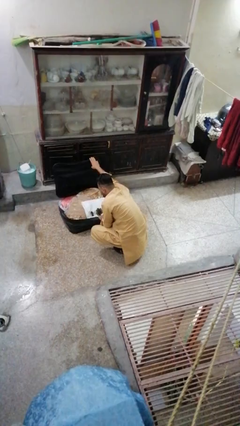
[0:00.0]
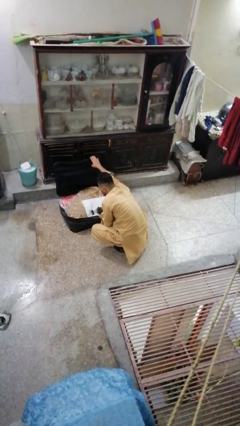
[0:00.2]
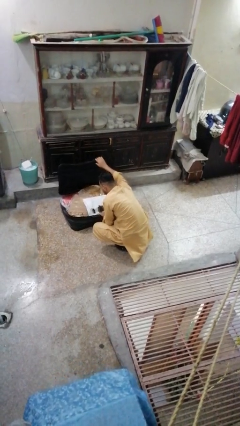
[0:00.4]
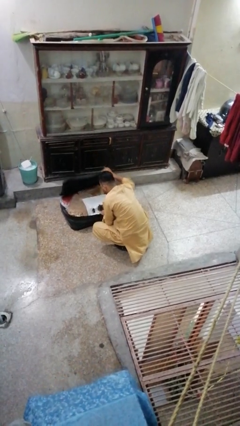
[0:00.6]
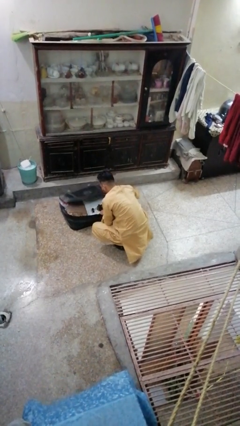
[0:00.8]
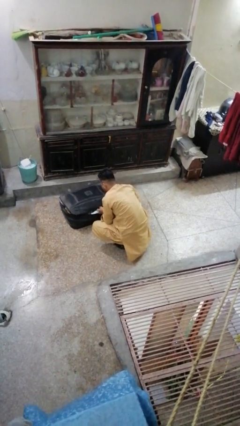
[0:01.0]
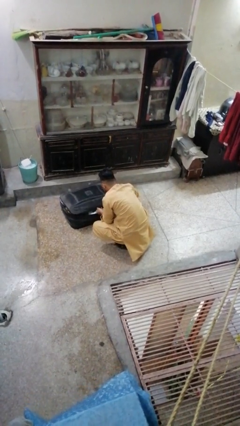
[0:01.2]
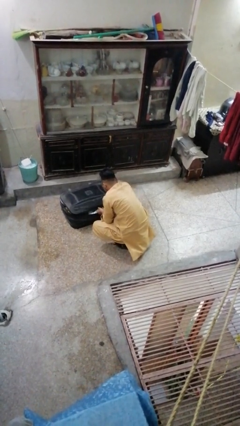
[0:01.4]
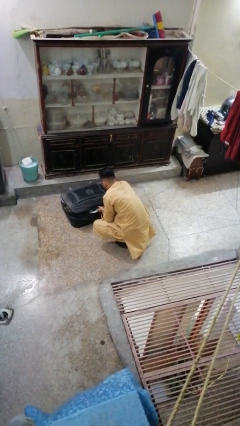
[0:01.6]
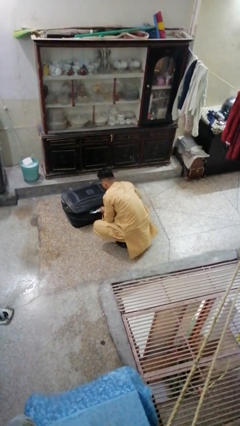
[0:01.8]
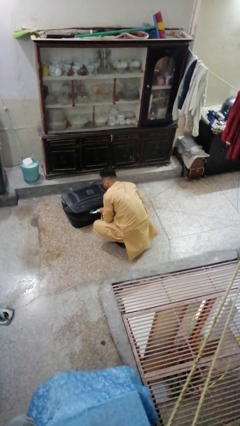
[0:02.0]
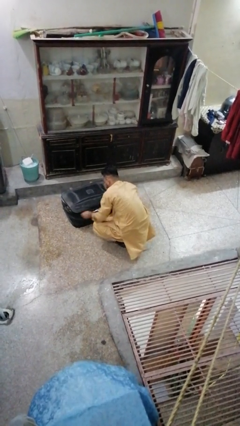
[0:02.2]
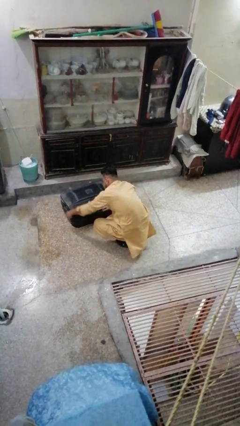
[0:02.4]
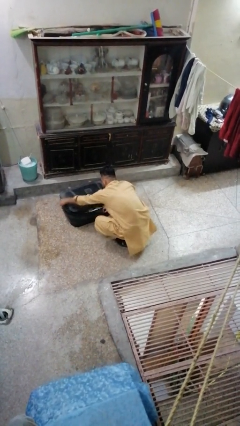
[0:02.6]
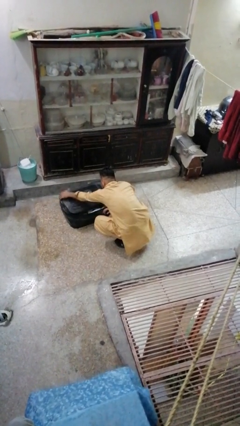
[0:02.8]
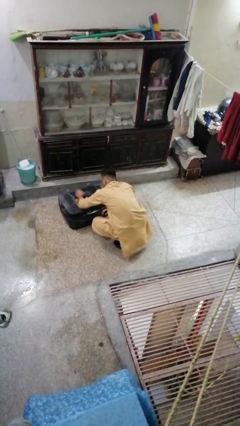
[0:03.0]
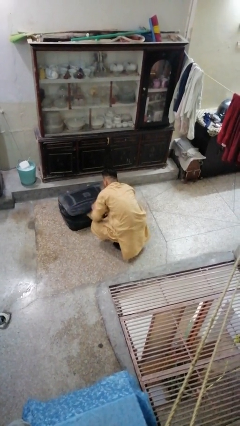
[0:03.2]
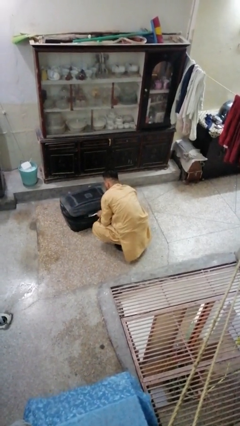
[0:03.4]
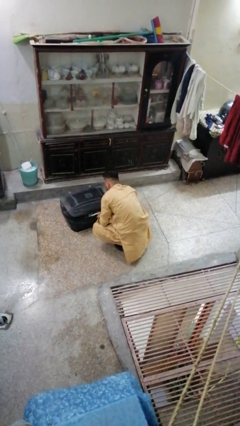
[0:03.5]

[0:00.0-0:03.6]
person closes suitcase

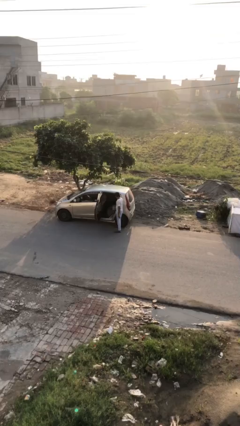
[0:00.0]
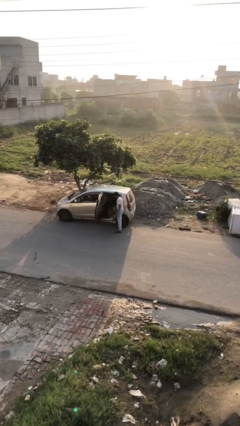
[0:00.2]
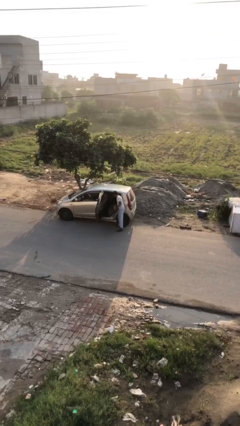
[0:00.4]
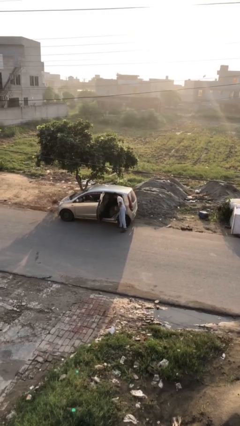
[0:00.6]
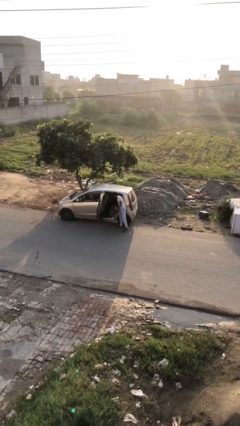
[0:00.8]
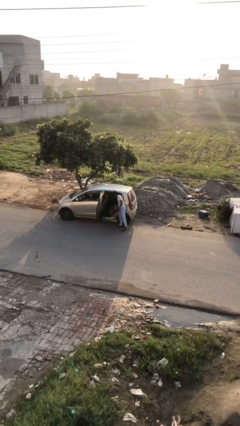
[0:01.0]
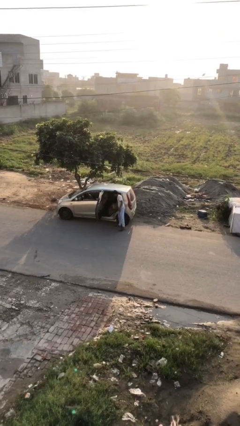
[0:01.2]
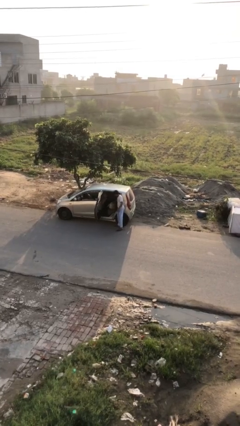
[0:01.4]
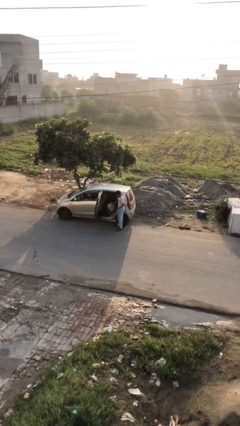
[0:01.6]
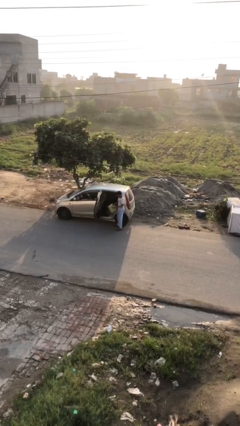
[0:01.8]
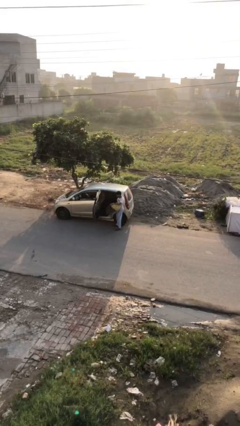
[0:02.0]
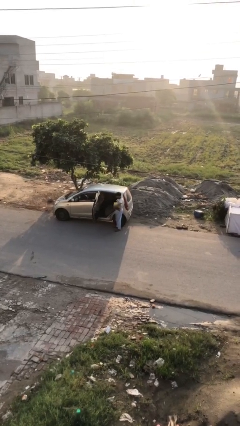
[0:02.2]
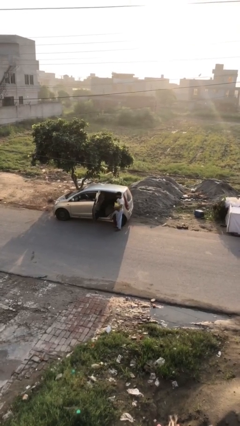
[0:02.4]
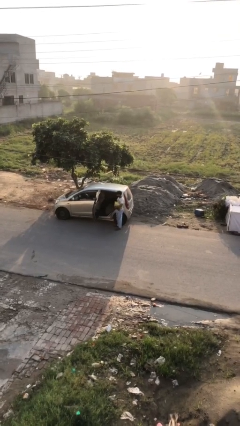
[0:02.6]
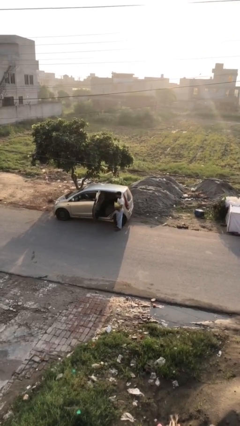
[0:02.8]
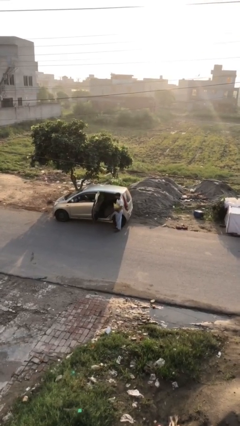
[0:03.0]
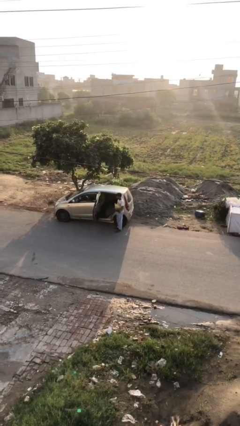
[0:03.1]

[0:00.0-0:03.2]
person unloads car

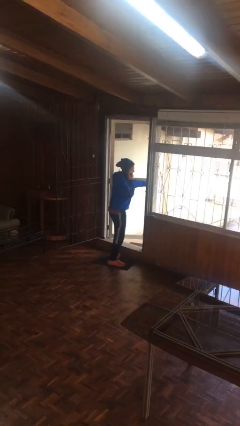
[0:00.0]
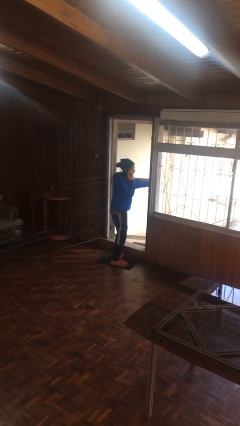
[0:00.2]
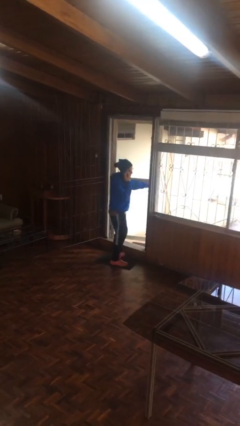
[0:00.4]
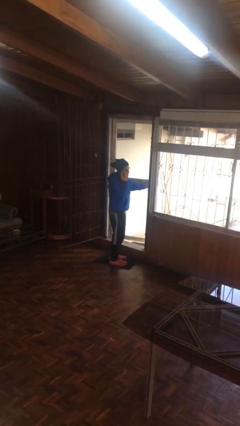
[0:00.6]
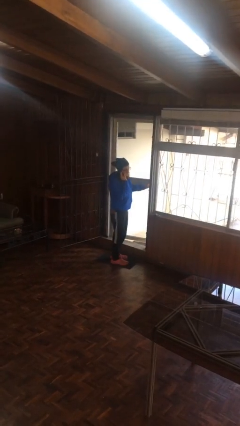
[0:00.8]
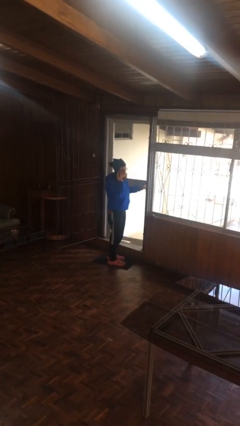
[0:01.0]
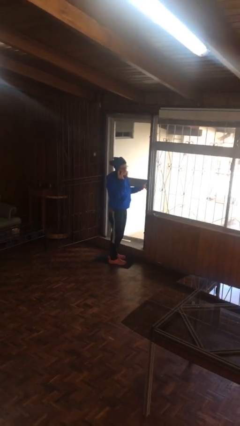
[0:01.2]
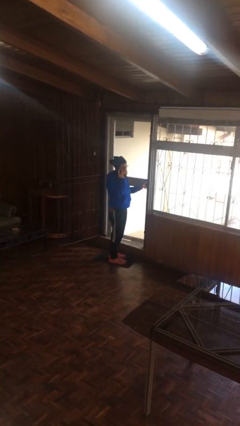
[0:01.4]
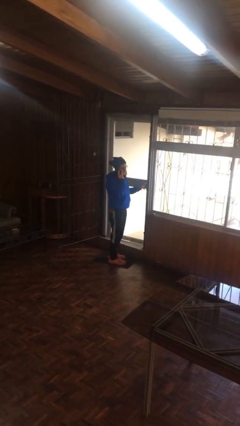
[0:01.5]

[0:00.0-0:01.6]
person closes facility door

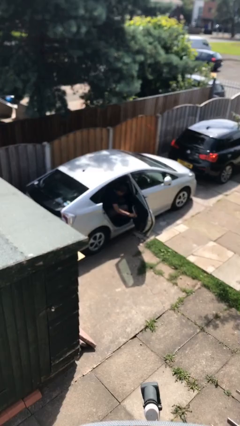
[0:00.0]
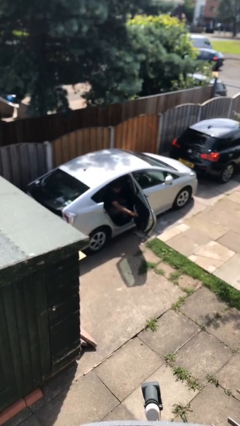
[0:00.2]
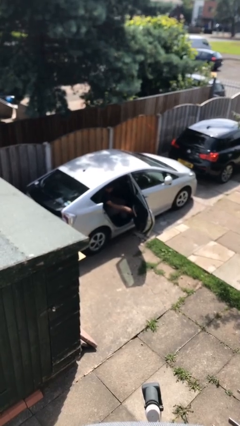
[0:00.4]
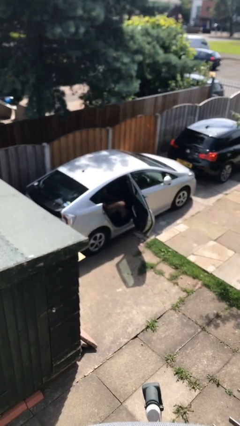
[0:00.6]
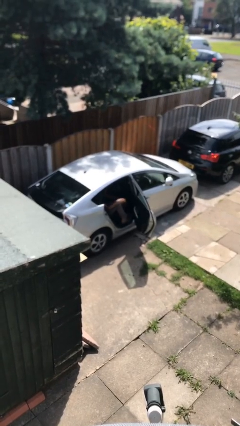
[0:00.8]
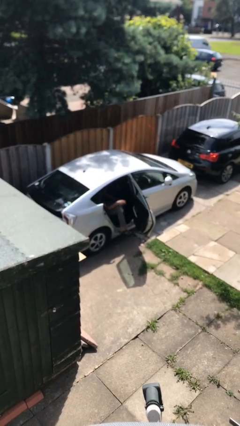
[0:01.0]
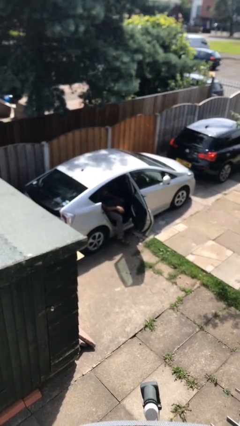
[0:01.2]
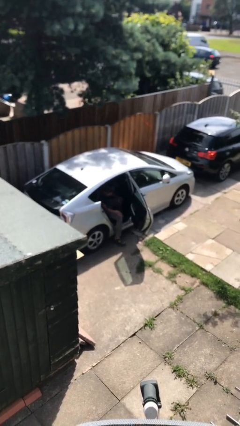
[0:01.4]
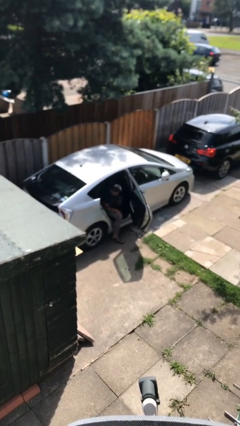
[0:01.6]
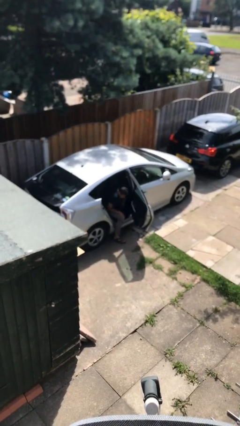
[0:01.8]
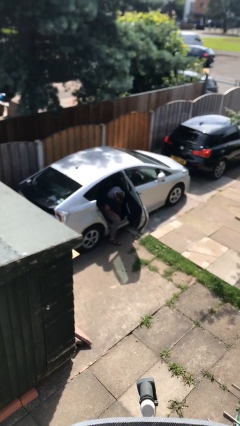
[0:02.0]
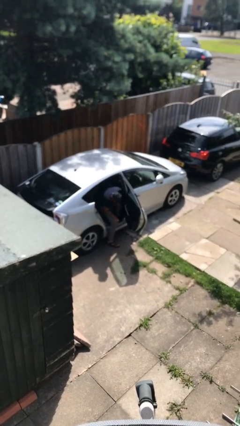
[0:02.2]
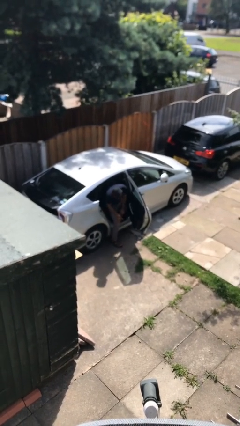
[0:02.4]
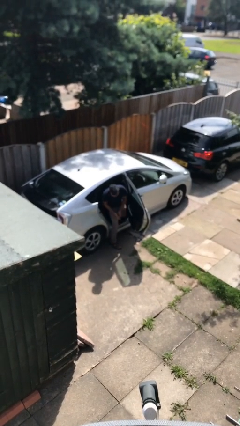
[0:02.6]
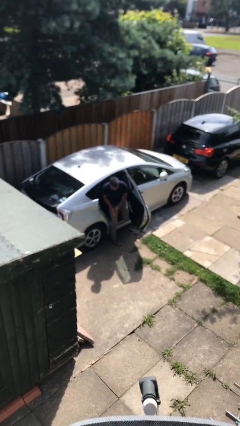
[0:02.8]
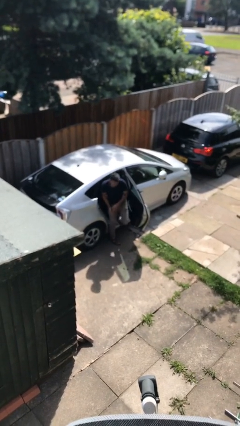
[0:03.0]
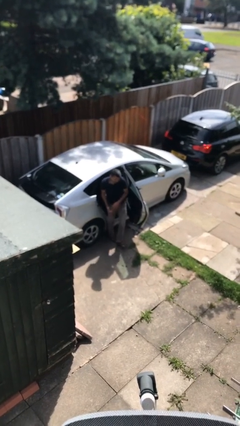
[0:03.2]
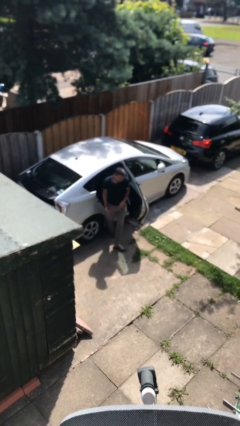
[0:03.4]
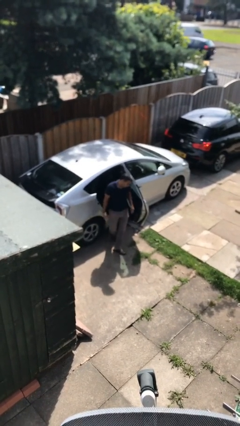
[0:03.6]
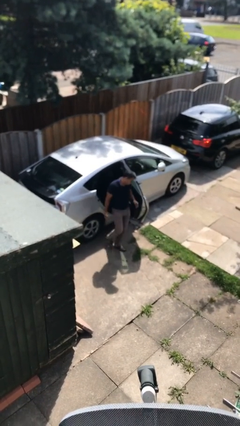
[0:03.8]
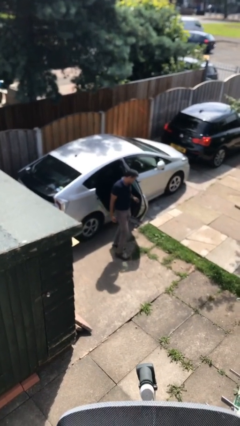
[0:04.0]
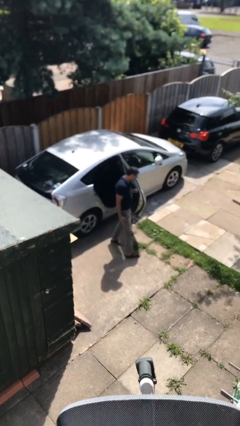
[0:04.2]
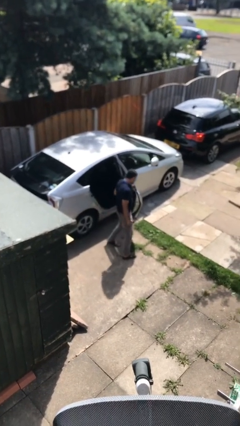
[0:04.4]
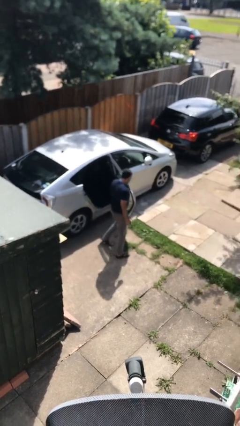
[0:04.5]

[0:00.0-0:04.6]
person exits car

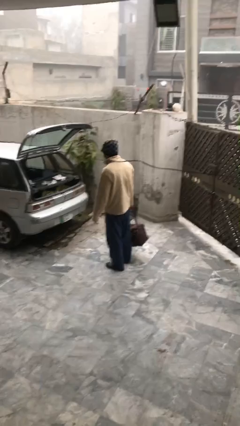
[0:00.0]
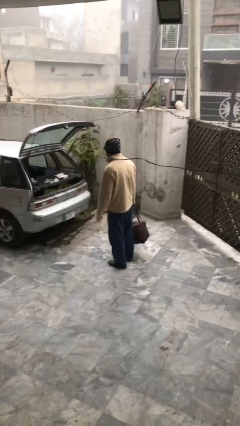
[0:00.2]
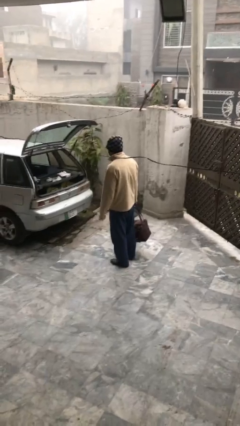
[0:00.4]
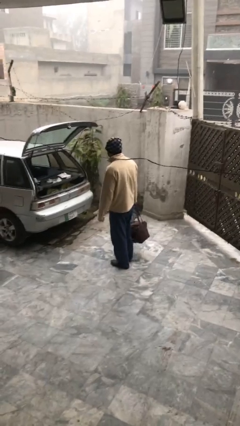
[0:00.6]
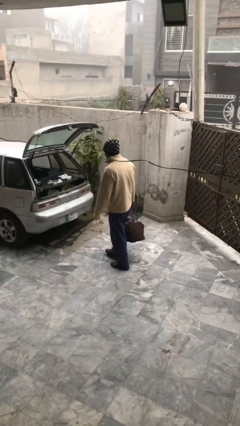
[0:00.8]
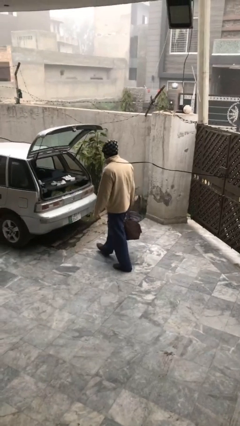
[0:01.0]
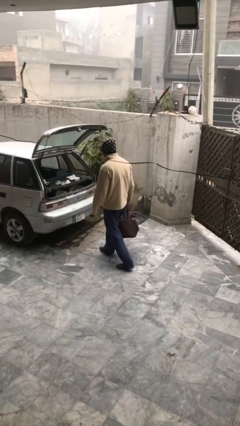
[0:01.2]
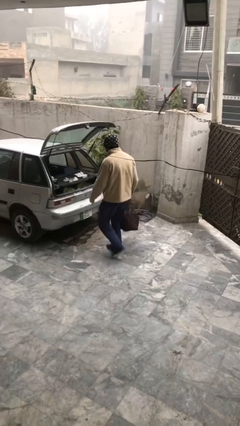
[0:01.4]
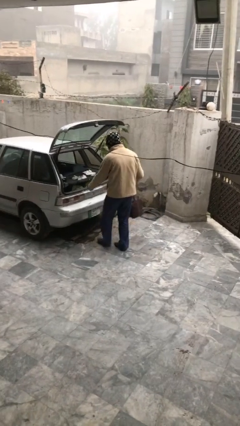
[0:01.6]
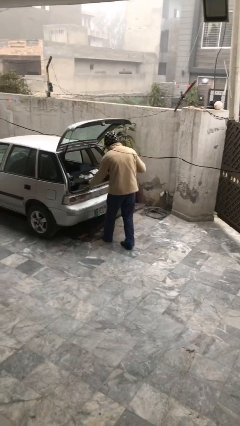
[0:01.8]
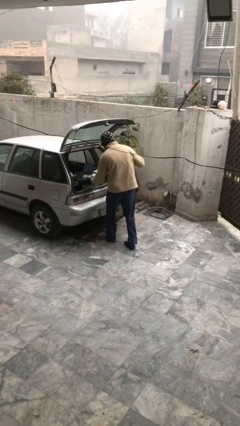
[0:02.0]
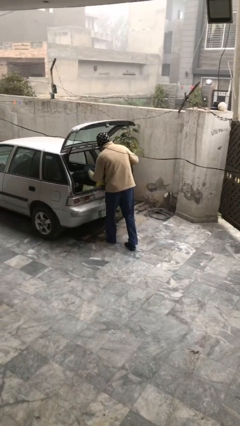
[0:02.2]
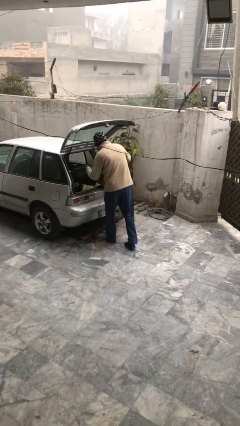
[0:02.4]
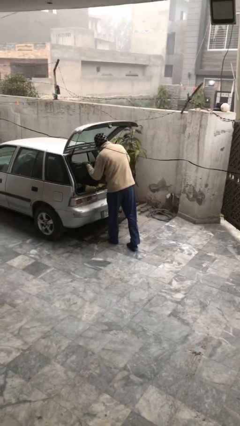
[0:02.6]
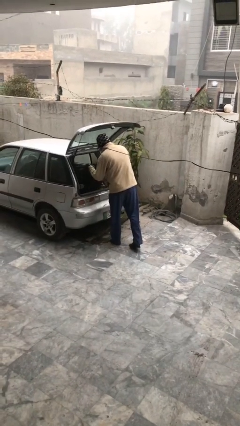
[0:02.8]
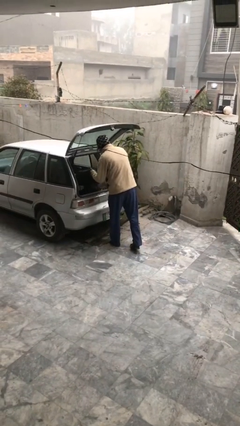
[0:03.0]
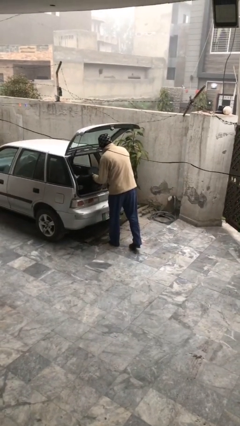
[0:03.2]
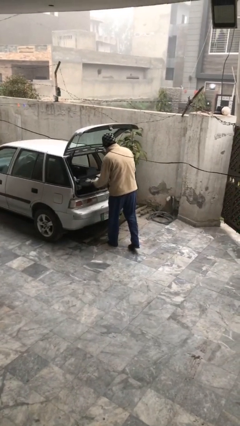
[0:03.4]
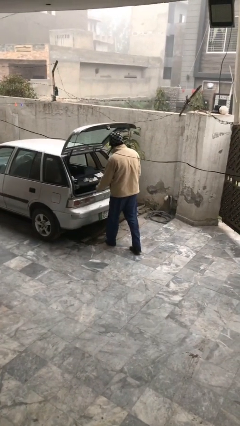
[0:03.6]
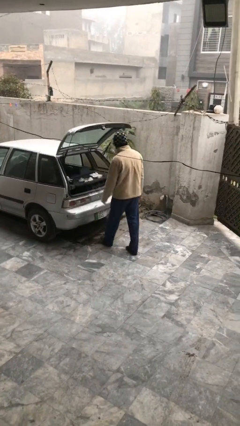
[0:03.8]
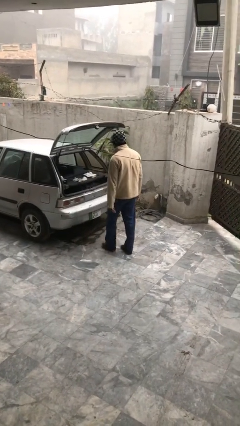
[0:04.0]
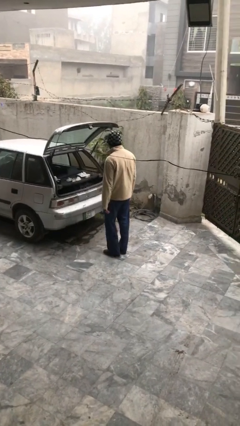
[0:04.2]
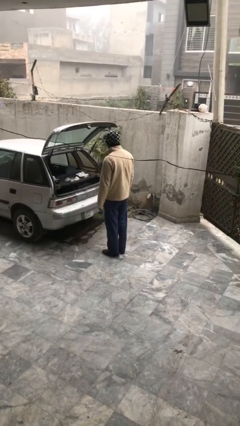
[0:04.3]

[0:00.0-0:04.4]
person loads car
